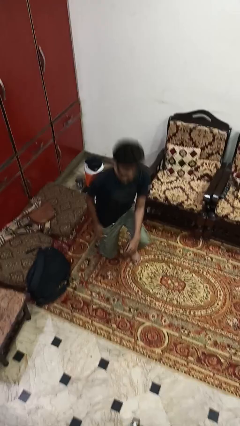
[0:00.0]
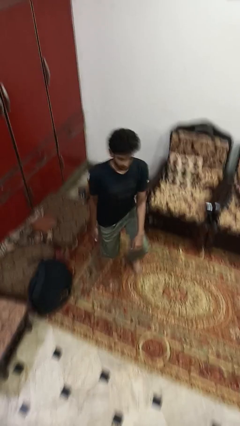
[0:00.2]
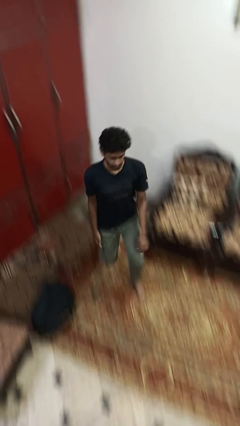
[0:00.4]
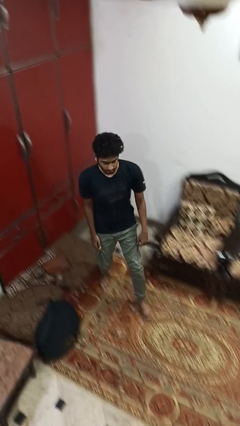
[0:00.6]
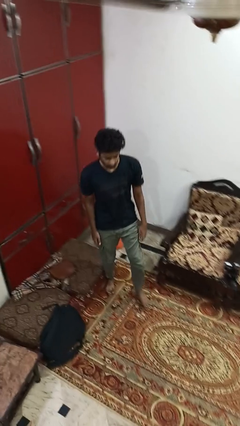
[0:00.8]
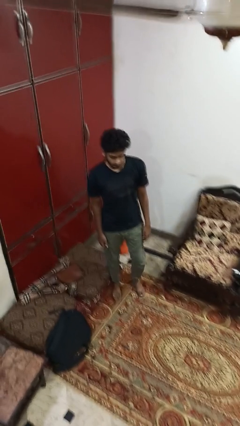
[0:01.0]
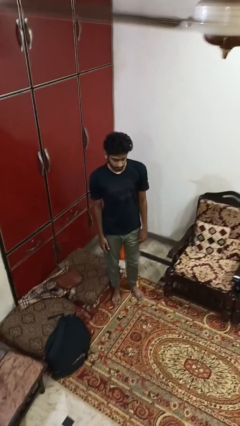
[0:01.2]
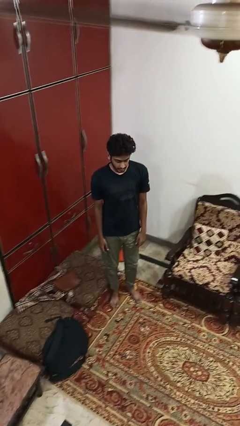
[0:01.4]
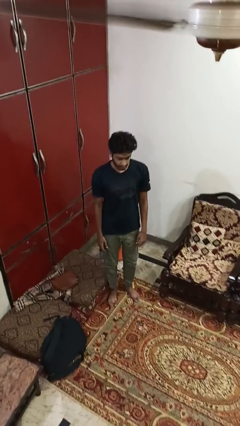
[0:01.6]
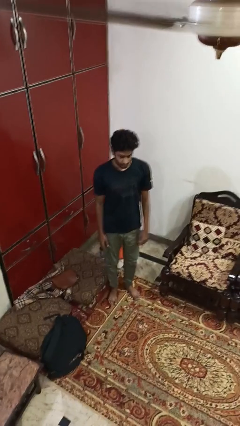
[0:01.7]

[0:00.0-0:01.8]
person stands up from floor

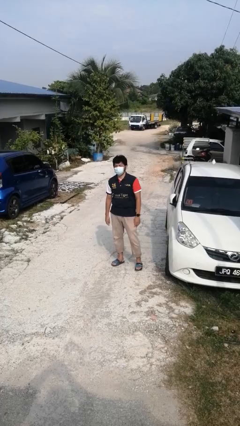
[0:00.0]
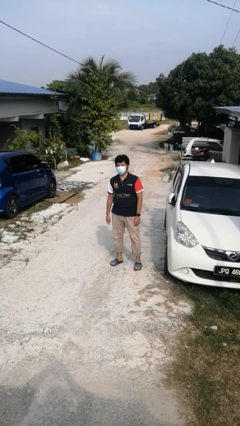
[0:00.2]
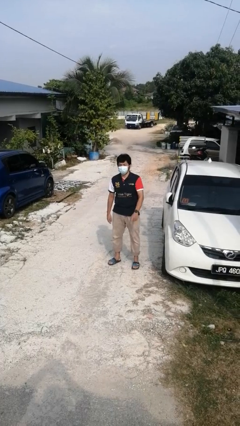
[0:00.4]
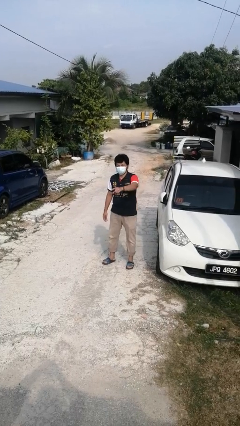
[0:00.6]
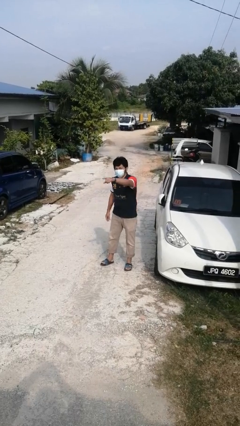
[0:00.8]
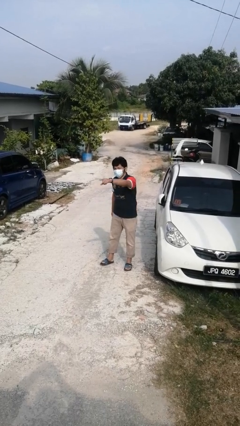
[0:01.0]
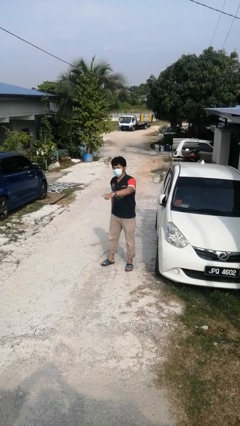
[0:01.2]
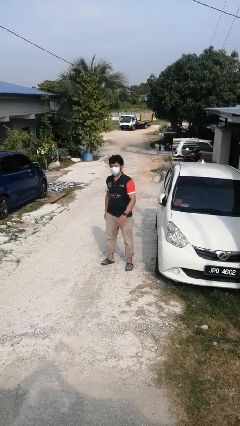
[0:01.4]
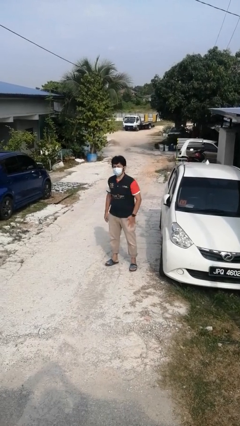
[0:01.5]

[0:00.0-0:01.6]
person points at person

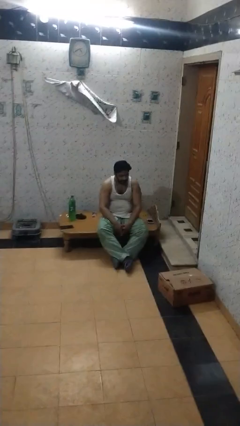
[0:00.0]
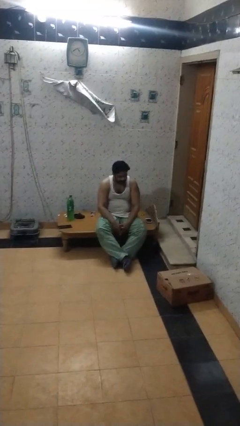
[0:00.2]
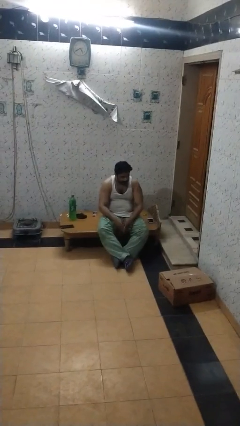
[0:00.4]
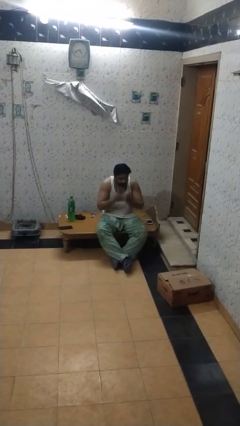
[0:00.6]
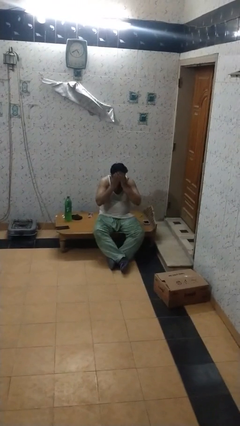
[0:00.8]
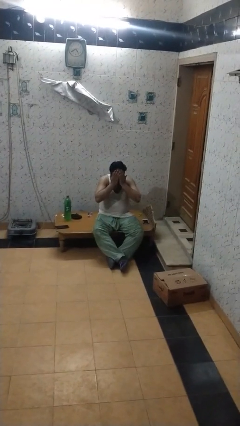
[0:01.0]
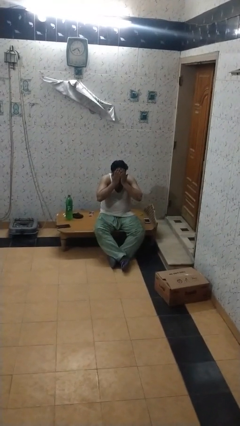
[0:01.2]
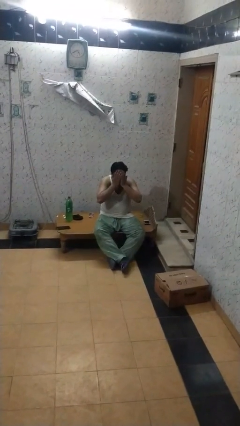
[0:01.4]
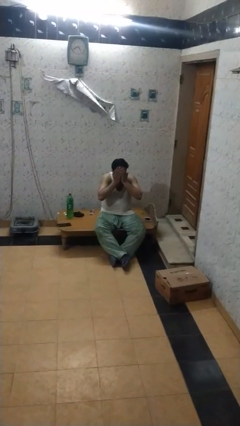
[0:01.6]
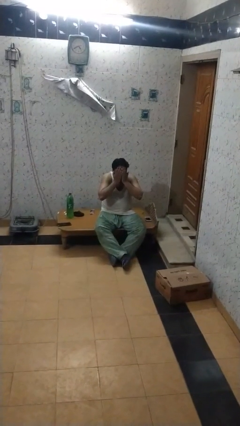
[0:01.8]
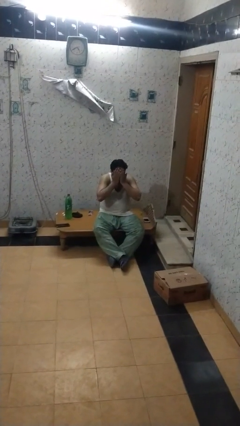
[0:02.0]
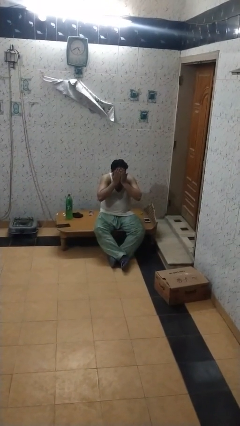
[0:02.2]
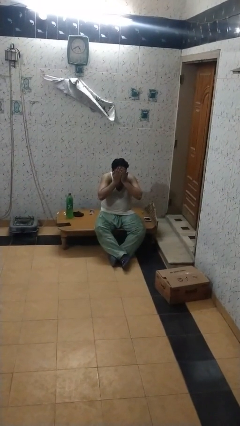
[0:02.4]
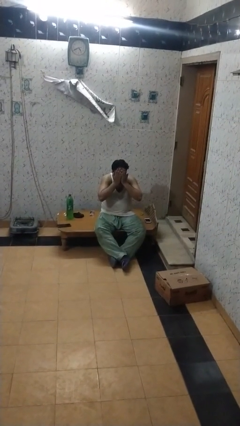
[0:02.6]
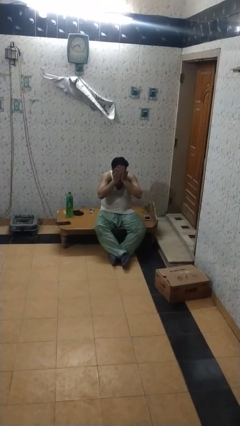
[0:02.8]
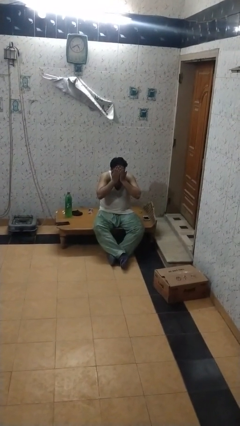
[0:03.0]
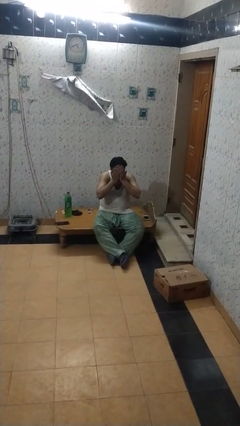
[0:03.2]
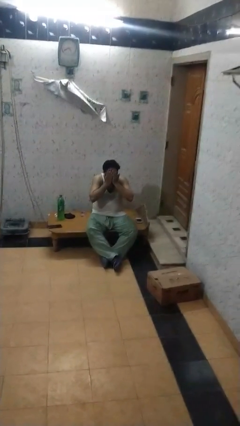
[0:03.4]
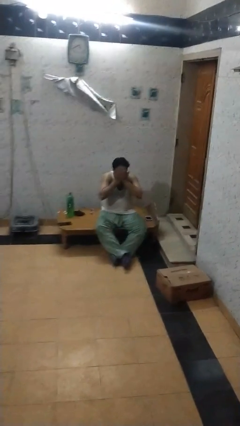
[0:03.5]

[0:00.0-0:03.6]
person covers face with hands

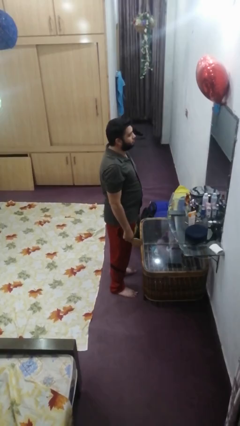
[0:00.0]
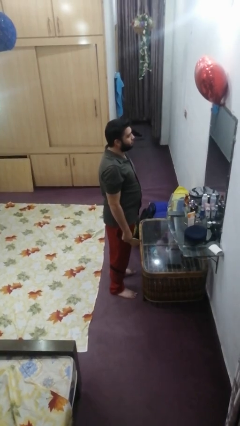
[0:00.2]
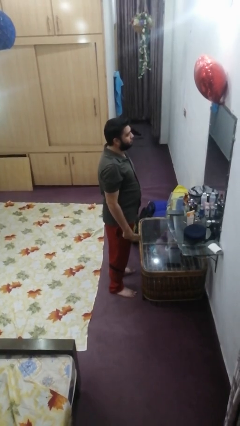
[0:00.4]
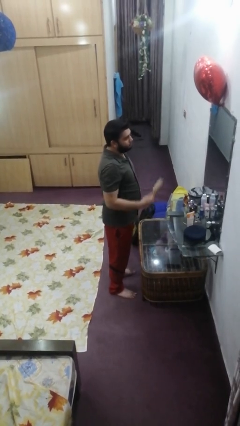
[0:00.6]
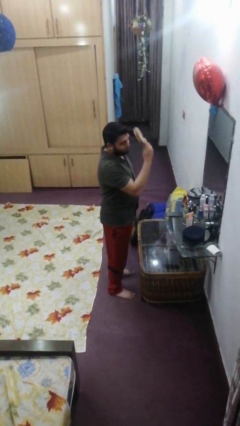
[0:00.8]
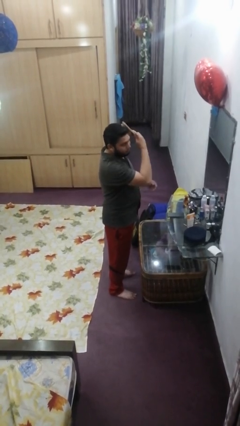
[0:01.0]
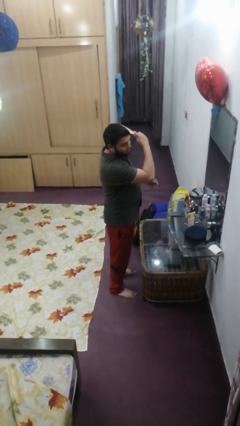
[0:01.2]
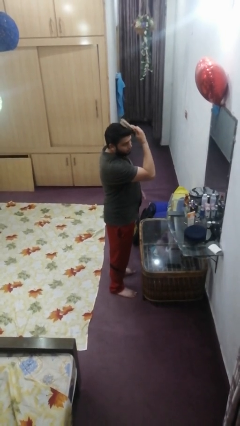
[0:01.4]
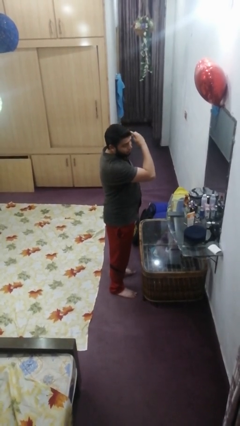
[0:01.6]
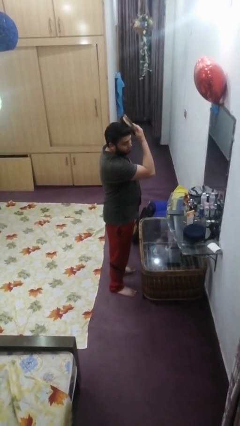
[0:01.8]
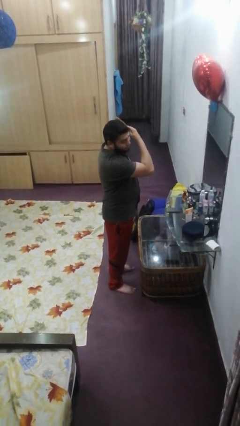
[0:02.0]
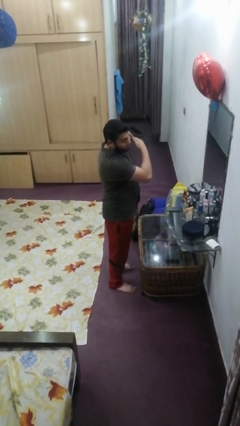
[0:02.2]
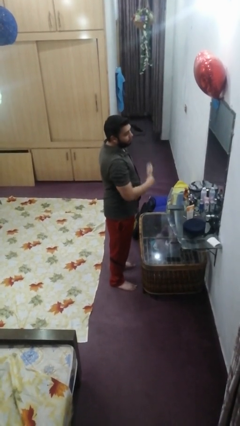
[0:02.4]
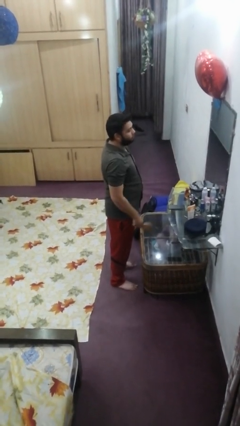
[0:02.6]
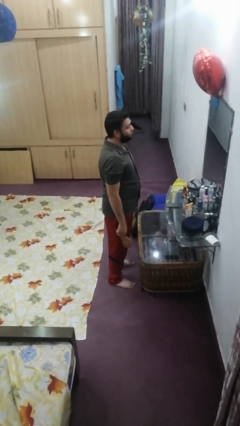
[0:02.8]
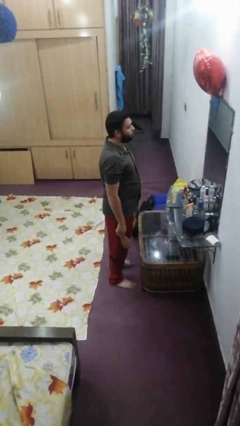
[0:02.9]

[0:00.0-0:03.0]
person brushes hair

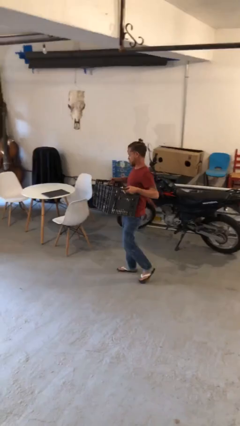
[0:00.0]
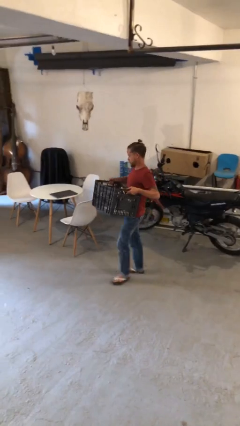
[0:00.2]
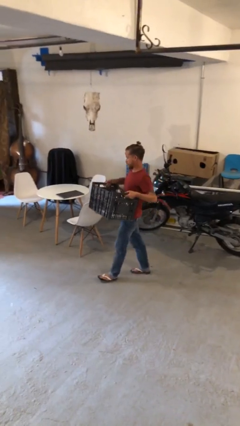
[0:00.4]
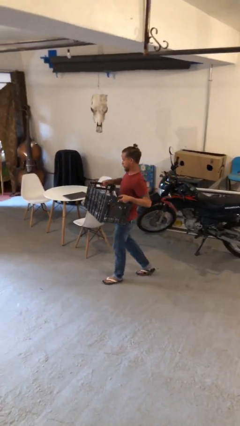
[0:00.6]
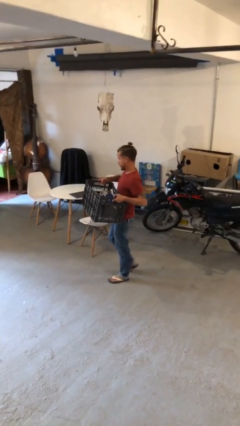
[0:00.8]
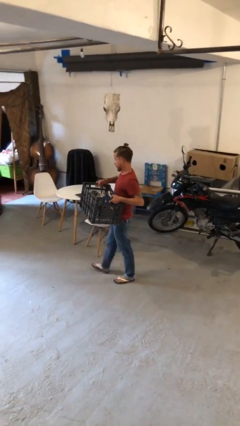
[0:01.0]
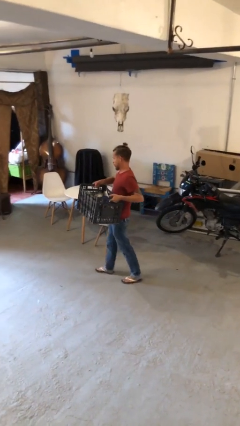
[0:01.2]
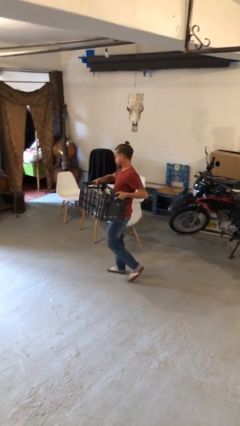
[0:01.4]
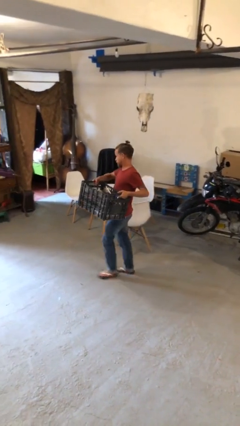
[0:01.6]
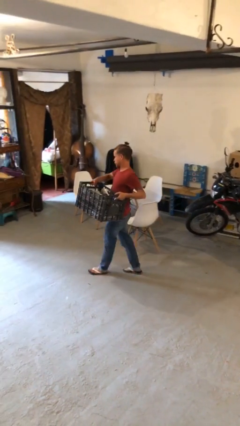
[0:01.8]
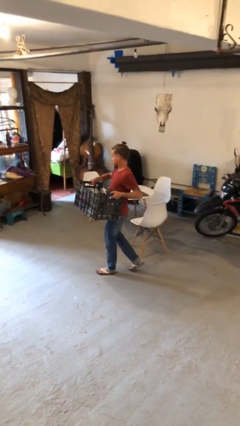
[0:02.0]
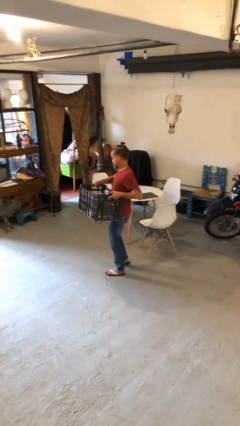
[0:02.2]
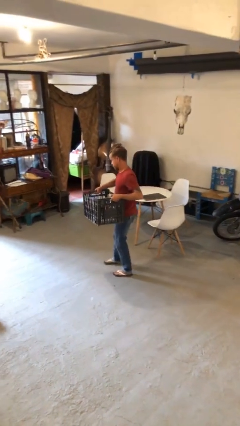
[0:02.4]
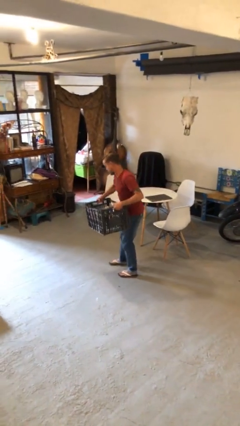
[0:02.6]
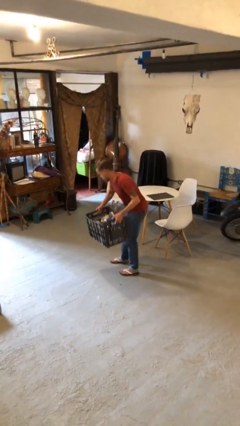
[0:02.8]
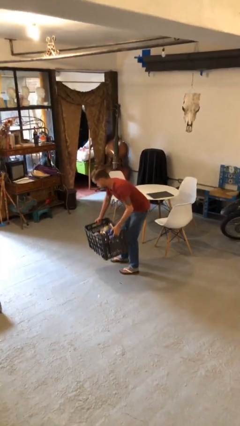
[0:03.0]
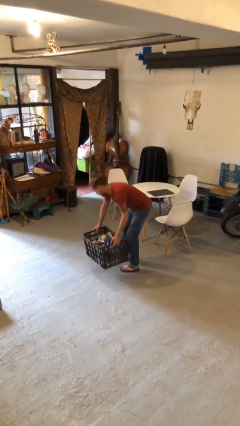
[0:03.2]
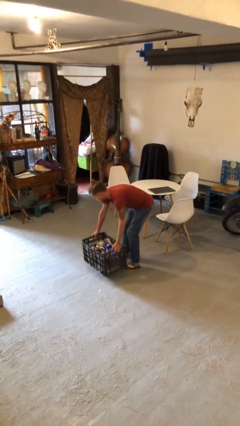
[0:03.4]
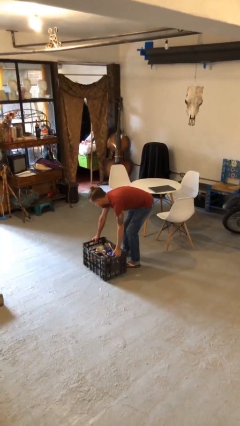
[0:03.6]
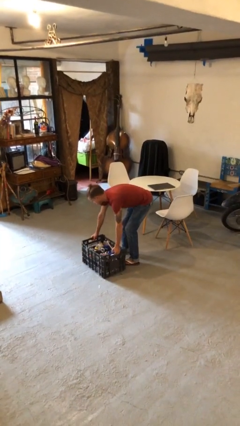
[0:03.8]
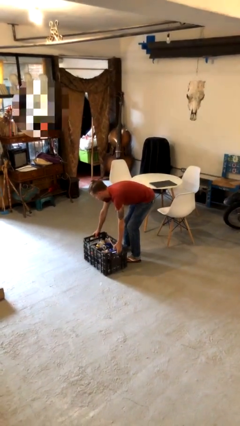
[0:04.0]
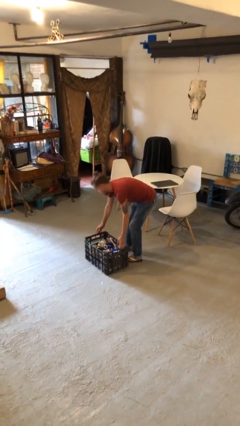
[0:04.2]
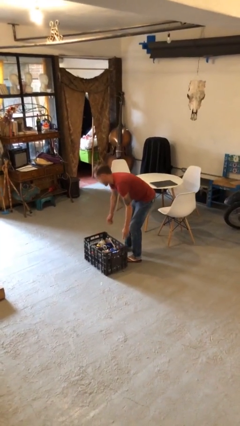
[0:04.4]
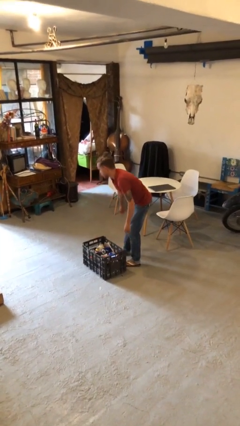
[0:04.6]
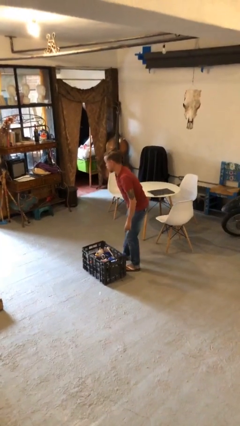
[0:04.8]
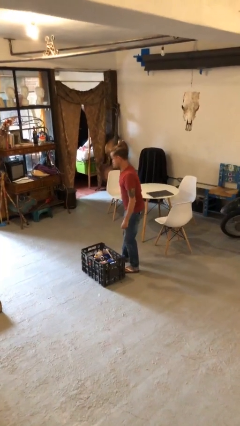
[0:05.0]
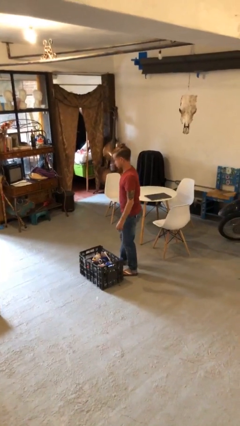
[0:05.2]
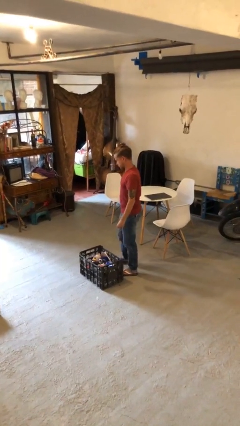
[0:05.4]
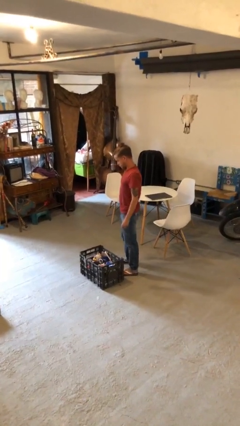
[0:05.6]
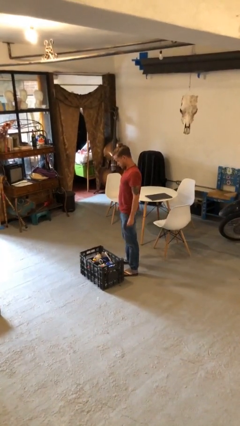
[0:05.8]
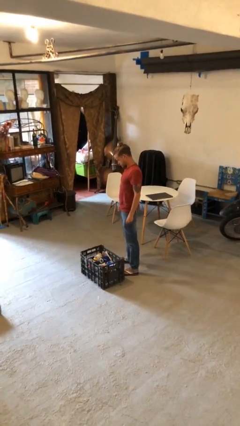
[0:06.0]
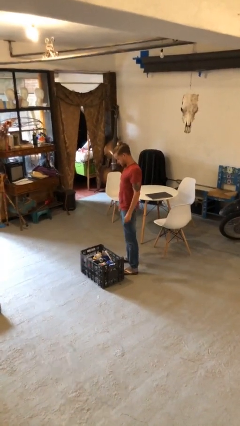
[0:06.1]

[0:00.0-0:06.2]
person puts down object on floor

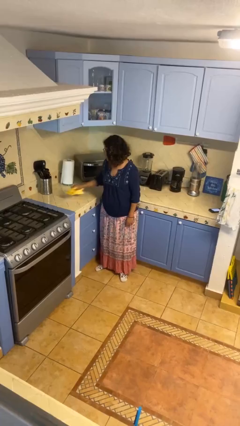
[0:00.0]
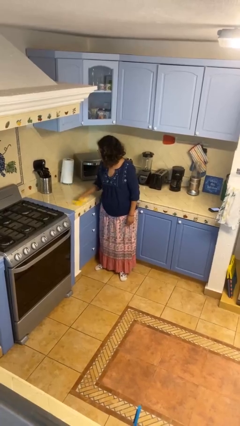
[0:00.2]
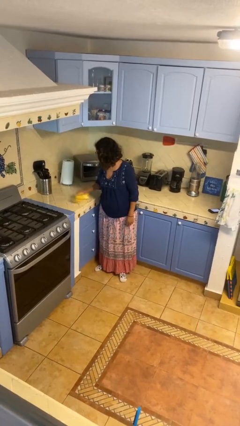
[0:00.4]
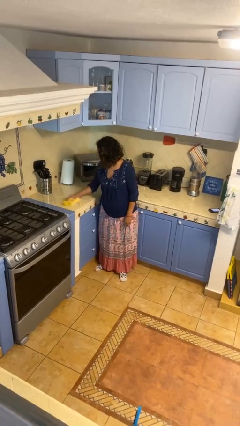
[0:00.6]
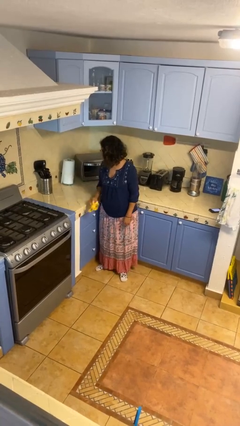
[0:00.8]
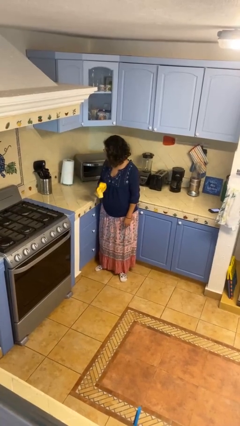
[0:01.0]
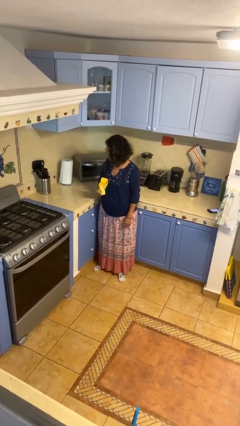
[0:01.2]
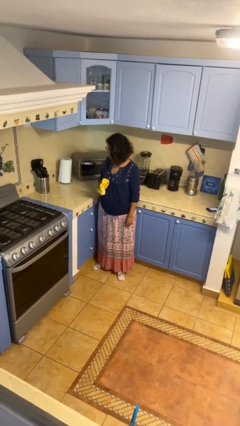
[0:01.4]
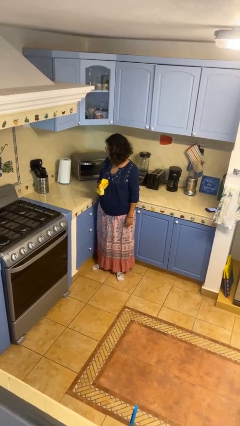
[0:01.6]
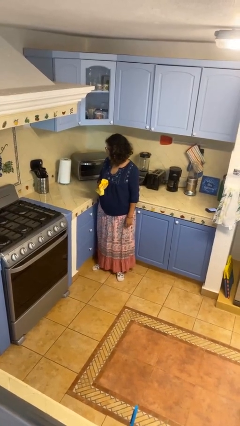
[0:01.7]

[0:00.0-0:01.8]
person cleans table with rag
